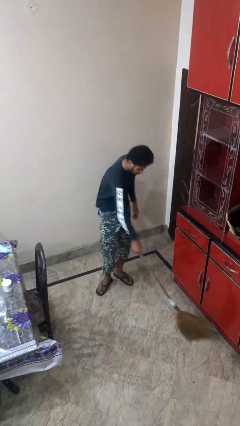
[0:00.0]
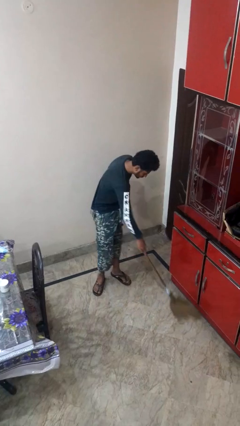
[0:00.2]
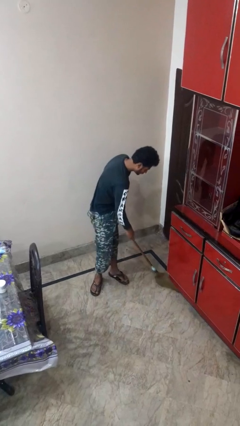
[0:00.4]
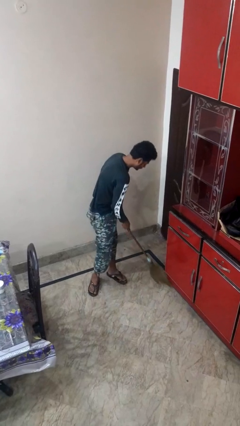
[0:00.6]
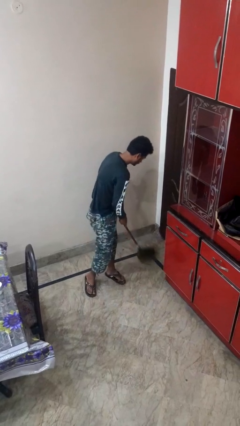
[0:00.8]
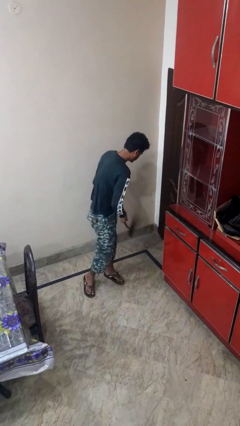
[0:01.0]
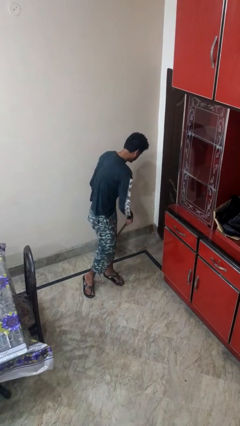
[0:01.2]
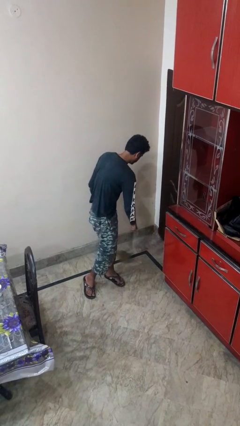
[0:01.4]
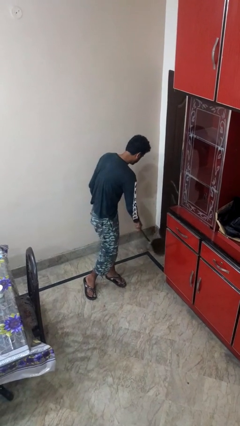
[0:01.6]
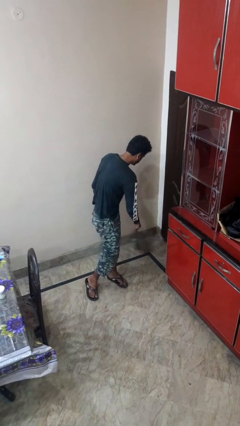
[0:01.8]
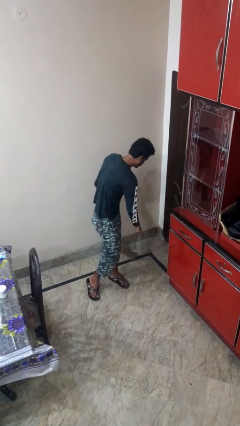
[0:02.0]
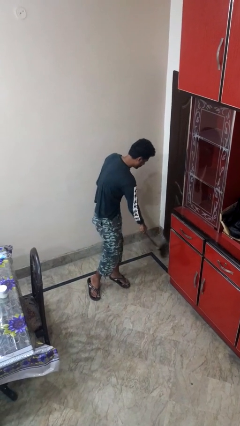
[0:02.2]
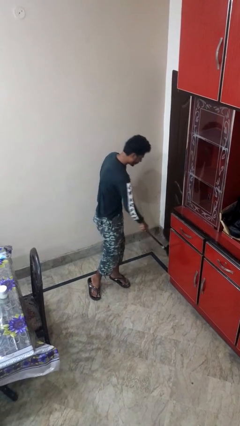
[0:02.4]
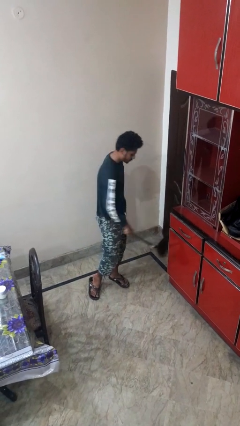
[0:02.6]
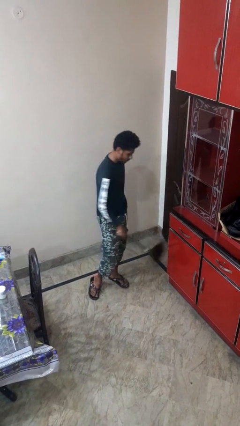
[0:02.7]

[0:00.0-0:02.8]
person sweeps floor

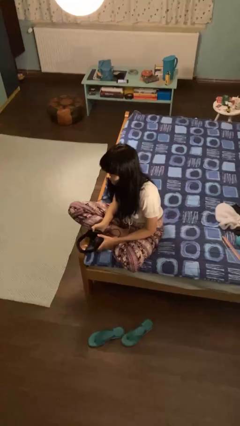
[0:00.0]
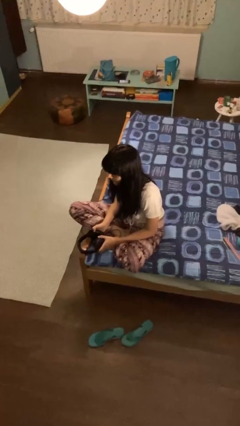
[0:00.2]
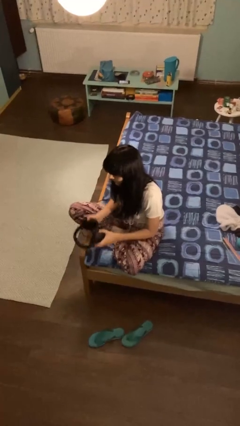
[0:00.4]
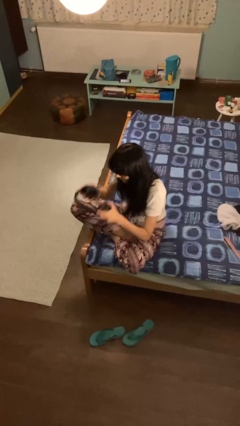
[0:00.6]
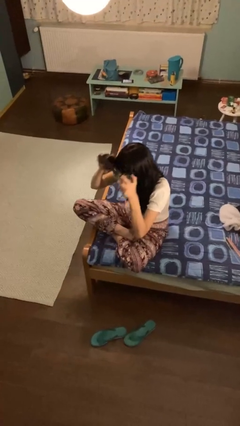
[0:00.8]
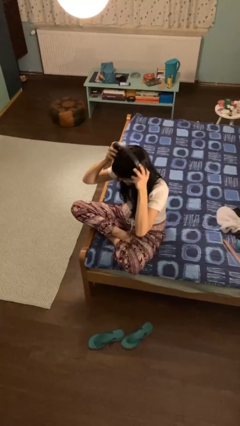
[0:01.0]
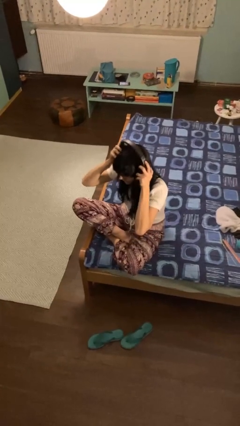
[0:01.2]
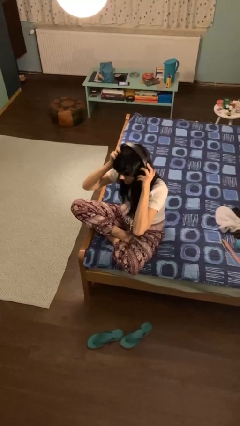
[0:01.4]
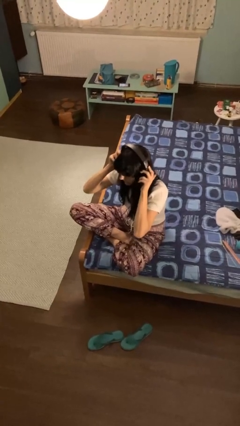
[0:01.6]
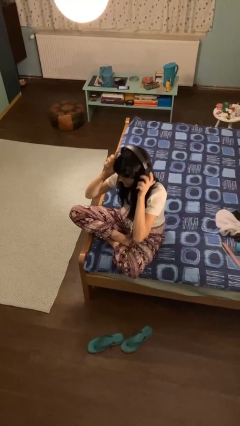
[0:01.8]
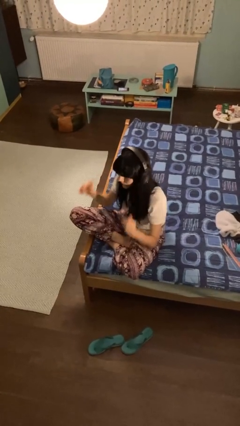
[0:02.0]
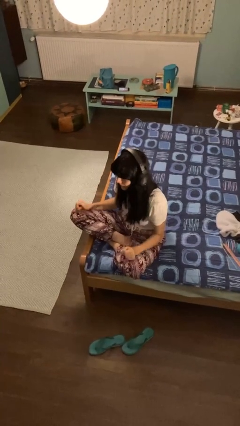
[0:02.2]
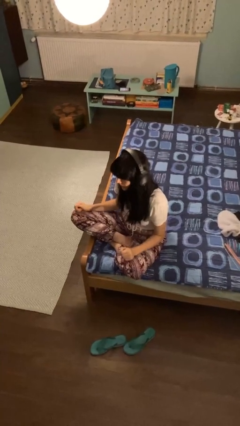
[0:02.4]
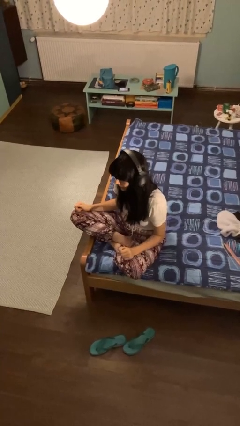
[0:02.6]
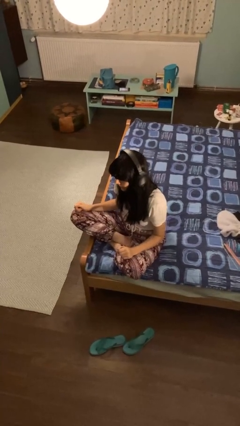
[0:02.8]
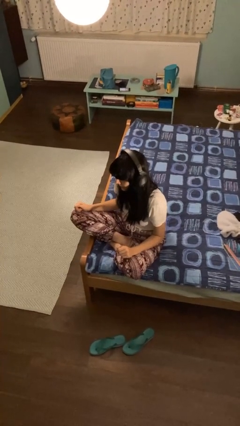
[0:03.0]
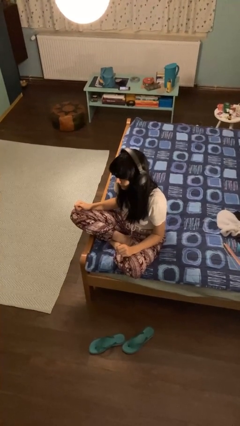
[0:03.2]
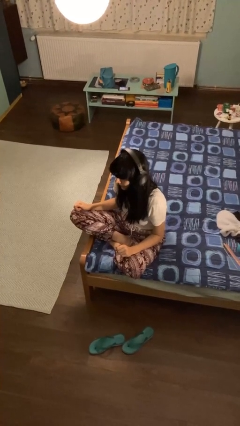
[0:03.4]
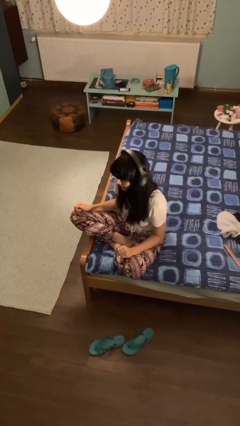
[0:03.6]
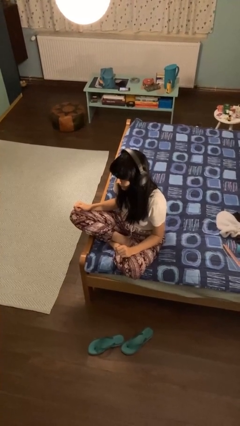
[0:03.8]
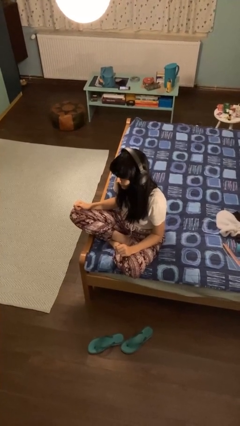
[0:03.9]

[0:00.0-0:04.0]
person puts on headphones

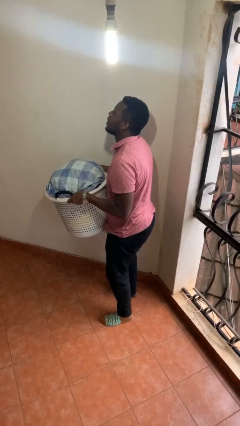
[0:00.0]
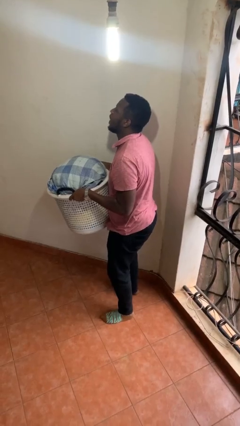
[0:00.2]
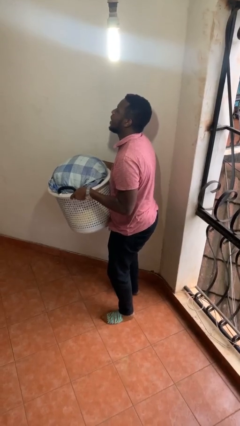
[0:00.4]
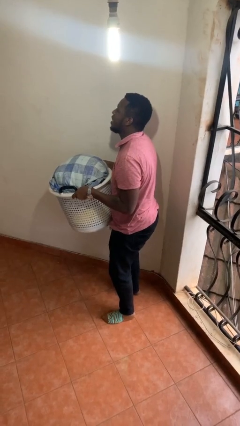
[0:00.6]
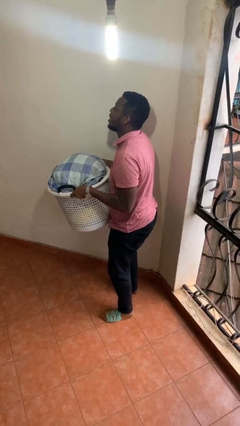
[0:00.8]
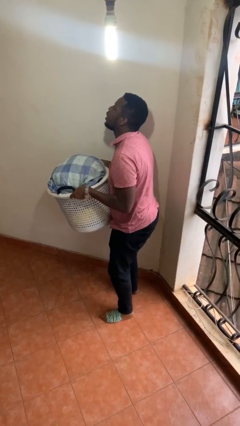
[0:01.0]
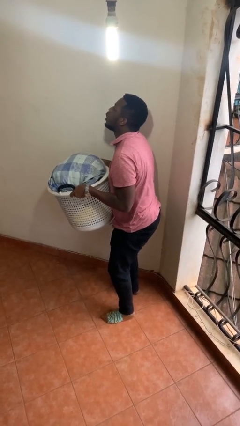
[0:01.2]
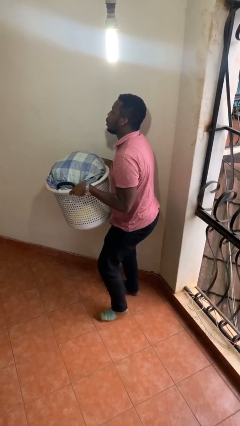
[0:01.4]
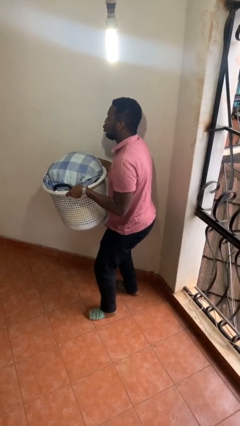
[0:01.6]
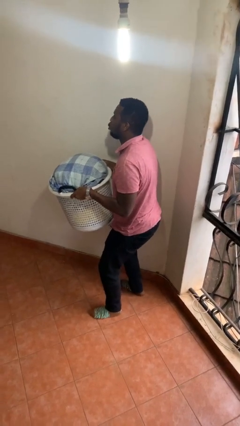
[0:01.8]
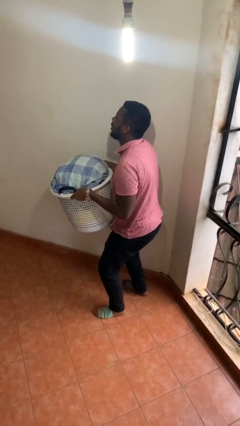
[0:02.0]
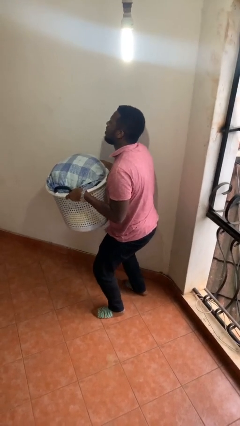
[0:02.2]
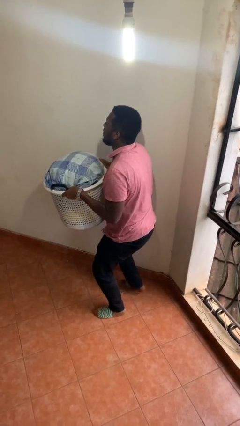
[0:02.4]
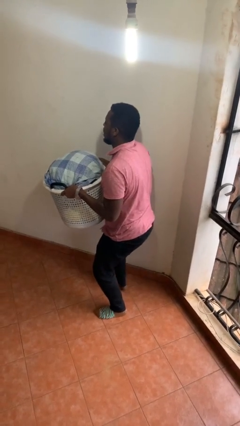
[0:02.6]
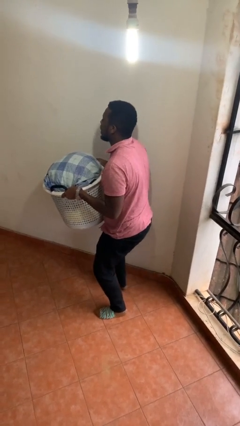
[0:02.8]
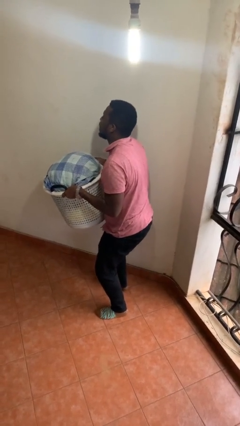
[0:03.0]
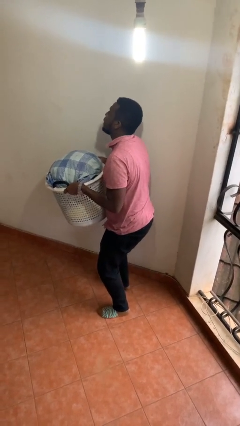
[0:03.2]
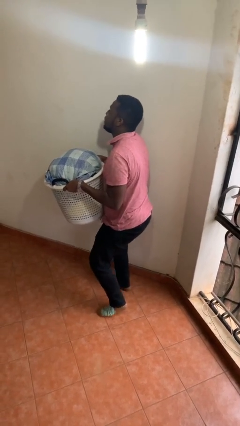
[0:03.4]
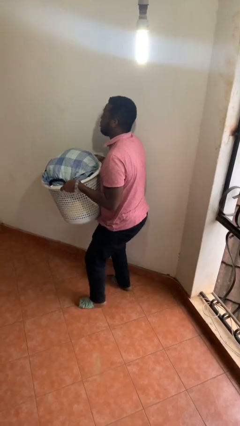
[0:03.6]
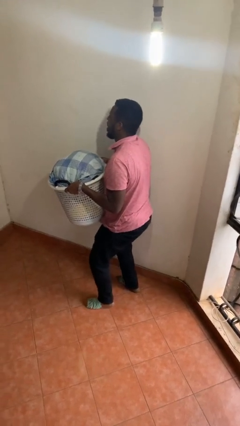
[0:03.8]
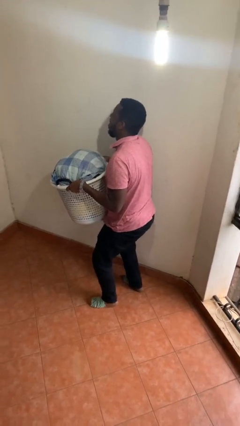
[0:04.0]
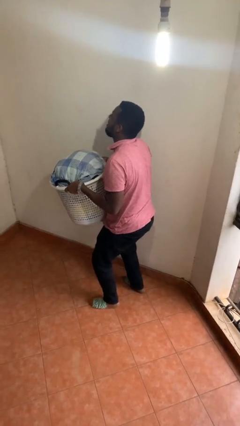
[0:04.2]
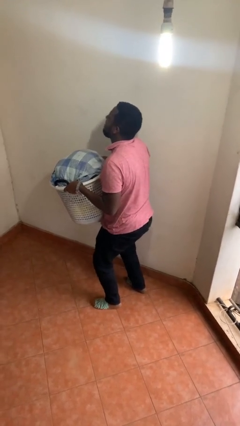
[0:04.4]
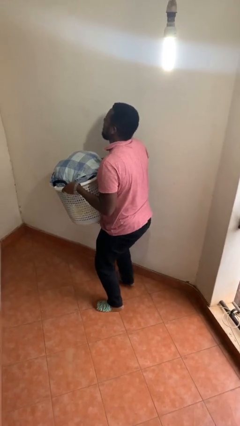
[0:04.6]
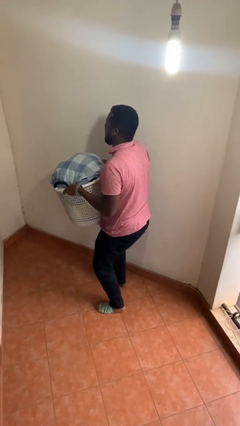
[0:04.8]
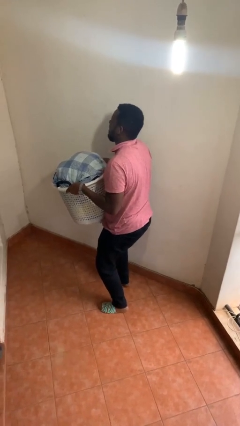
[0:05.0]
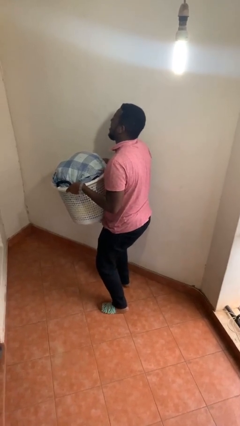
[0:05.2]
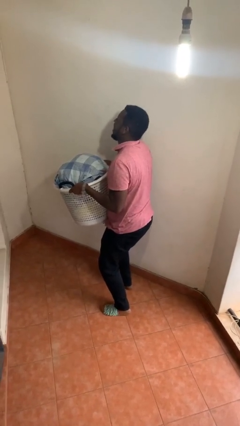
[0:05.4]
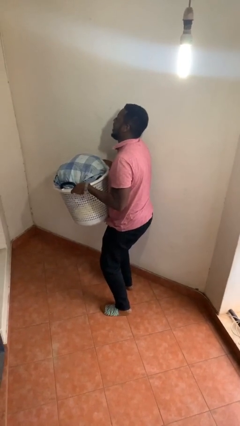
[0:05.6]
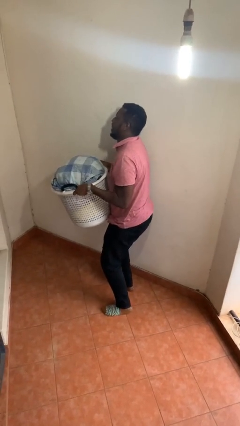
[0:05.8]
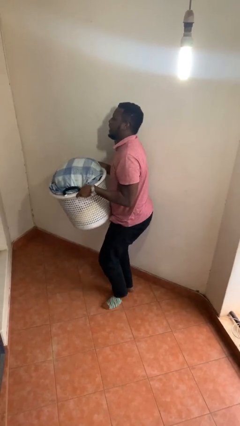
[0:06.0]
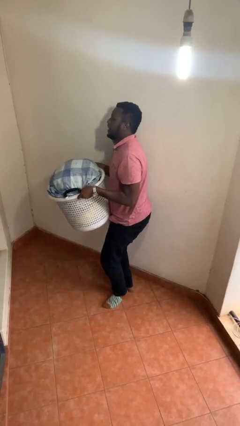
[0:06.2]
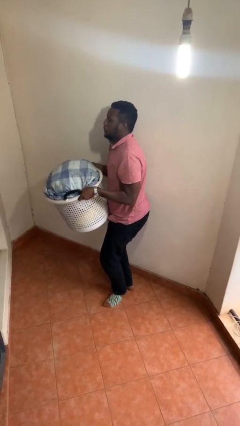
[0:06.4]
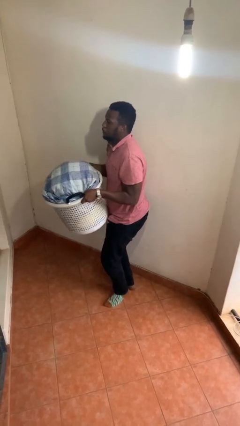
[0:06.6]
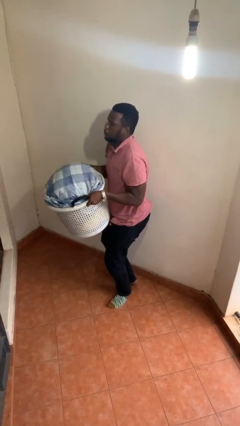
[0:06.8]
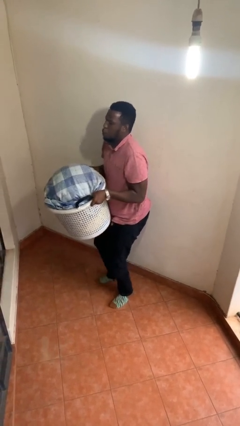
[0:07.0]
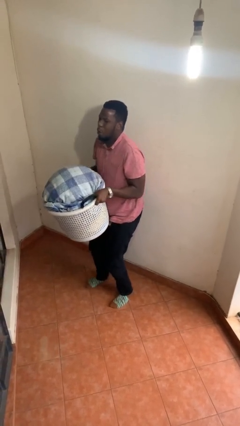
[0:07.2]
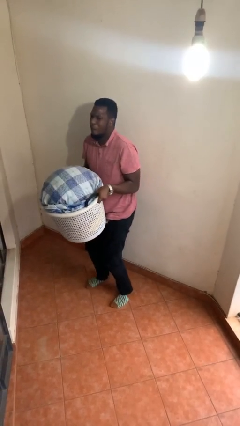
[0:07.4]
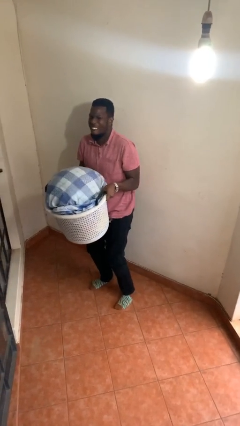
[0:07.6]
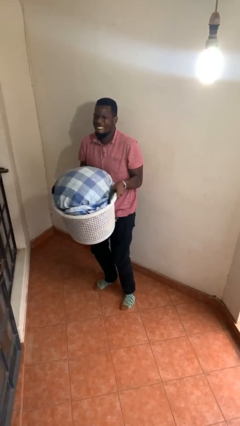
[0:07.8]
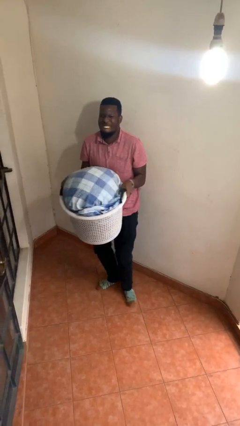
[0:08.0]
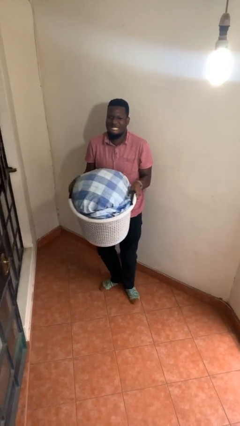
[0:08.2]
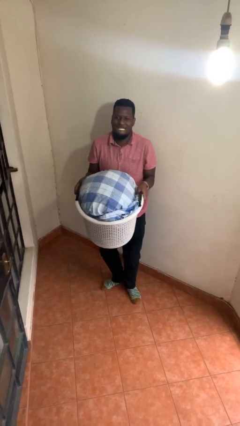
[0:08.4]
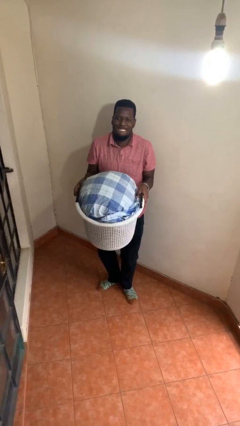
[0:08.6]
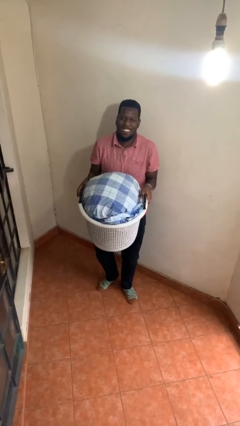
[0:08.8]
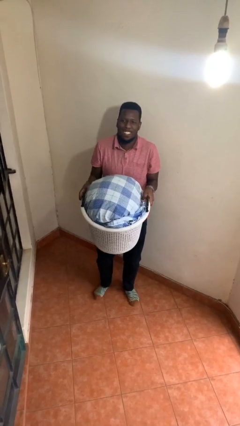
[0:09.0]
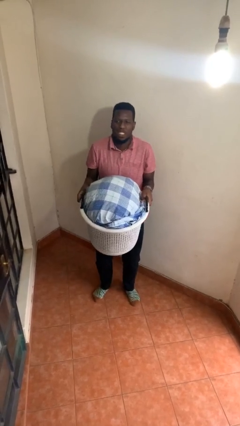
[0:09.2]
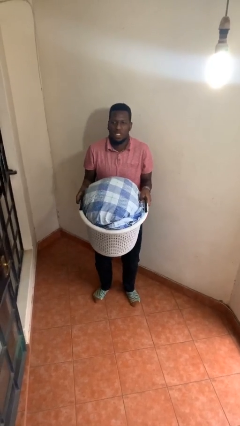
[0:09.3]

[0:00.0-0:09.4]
person carries heavy object

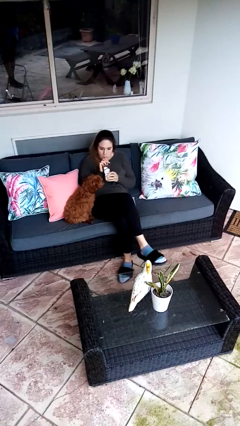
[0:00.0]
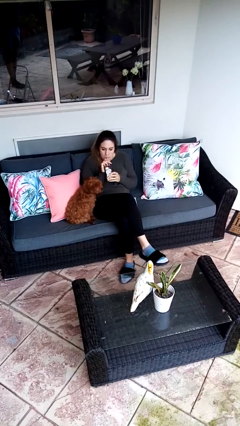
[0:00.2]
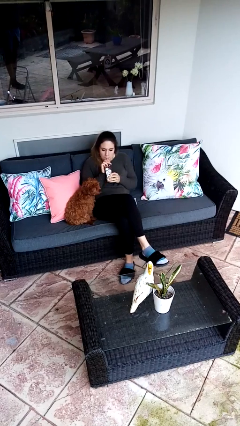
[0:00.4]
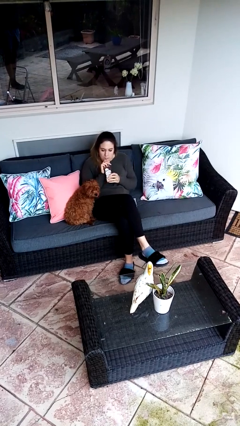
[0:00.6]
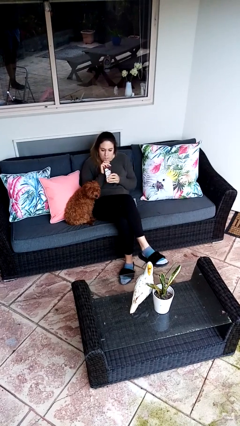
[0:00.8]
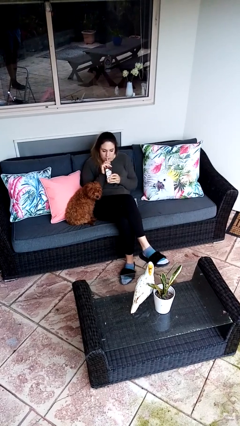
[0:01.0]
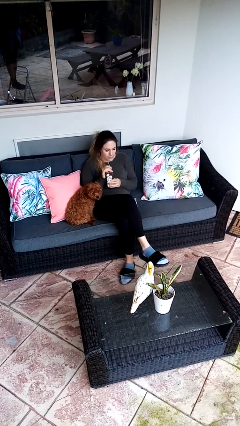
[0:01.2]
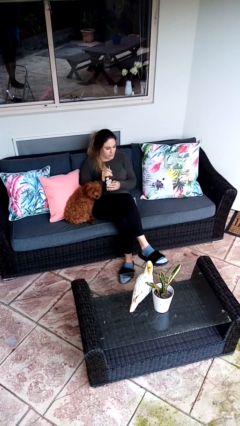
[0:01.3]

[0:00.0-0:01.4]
person drinks from straw

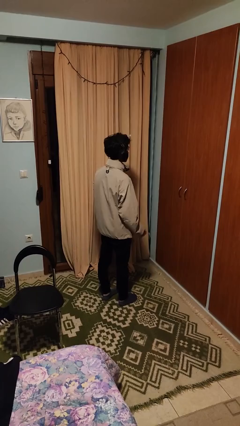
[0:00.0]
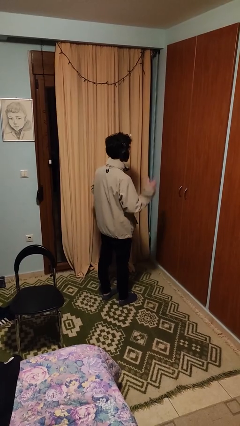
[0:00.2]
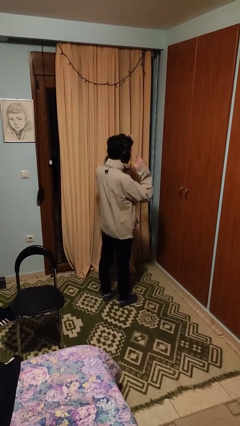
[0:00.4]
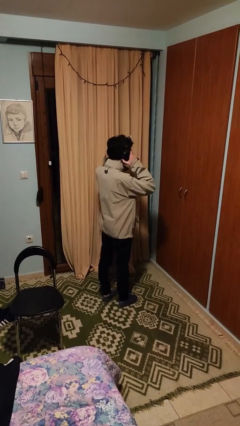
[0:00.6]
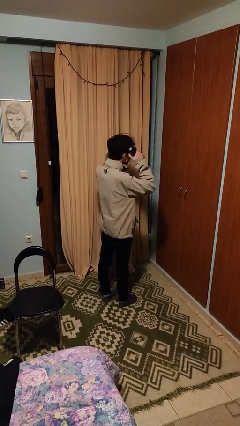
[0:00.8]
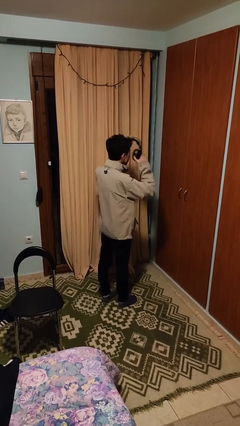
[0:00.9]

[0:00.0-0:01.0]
person takes off headphones
